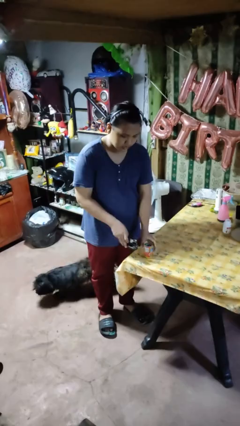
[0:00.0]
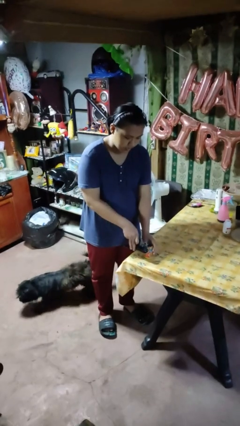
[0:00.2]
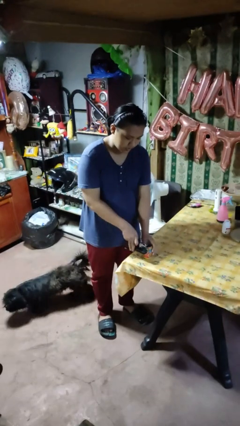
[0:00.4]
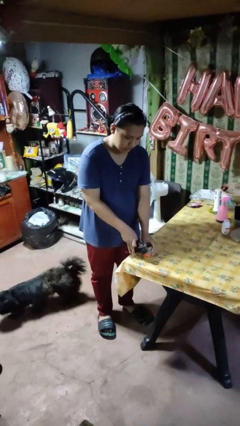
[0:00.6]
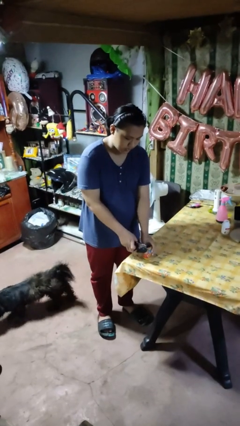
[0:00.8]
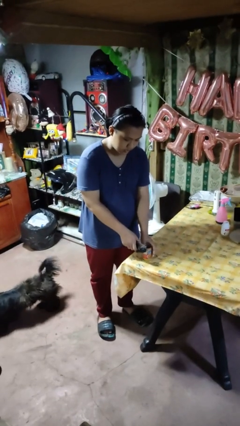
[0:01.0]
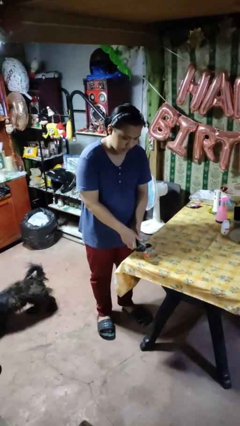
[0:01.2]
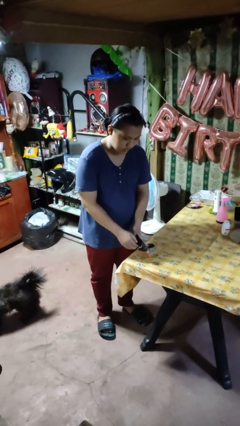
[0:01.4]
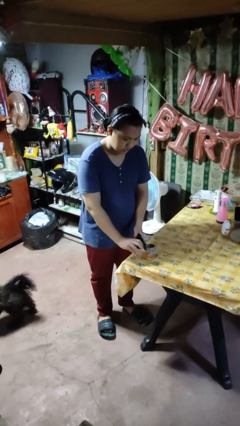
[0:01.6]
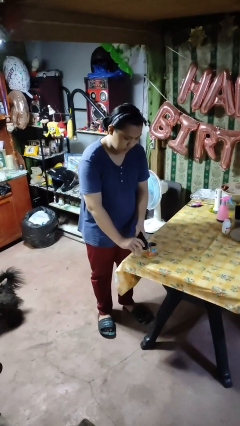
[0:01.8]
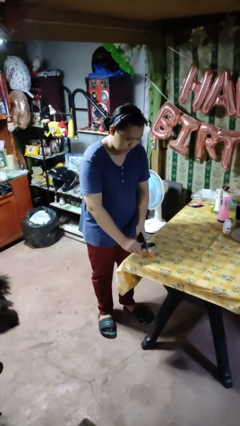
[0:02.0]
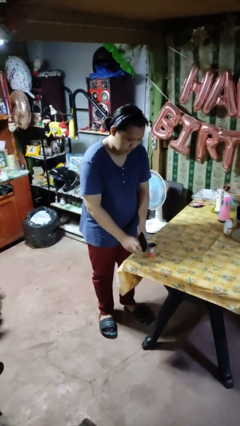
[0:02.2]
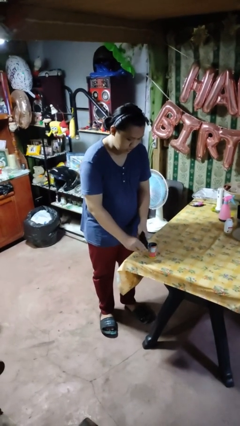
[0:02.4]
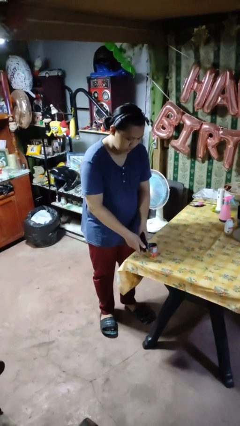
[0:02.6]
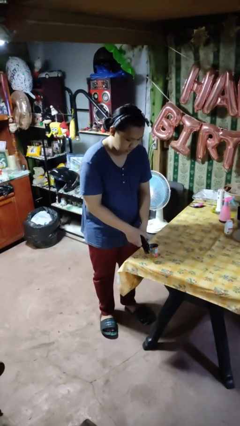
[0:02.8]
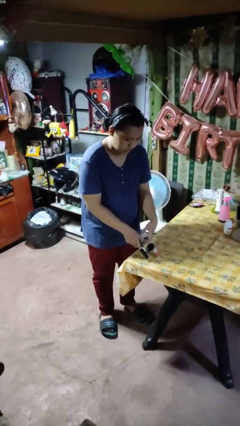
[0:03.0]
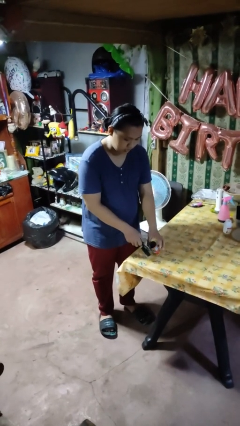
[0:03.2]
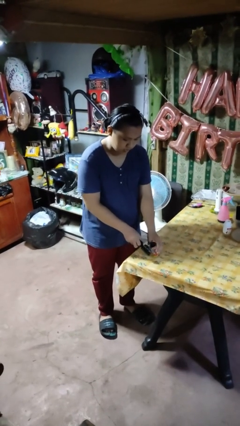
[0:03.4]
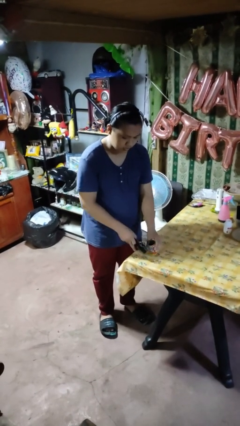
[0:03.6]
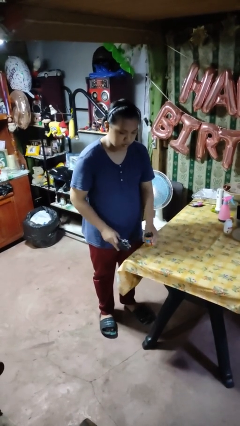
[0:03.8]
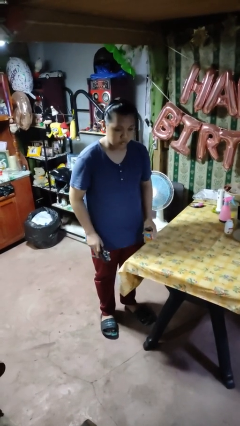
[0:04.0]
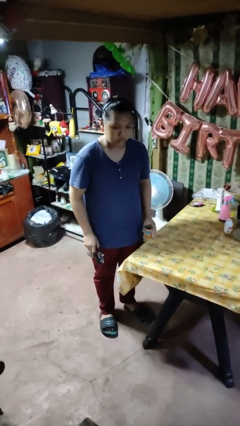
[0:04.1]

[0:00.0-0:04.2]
person opens can with can opener

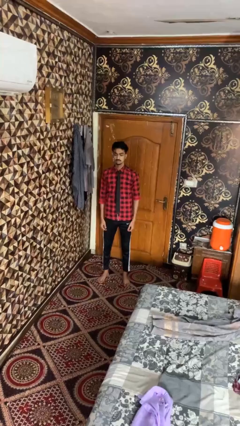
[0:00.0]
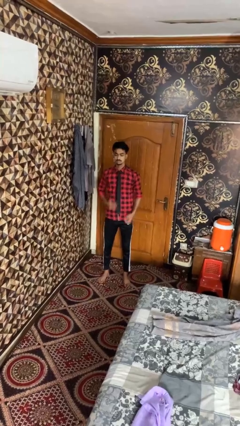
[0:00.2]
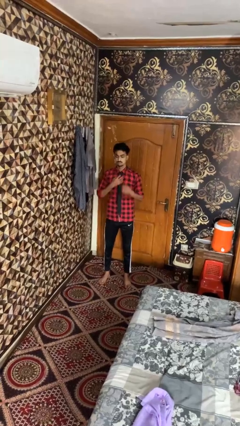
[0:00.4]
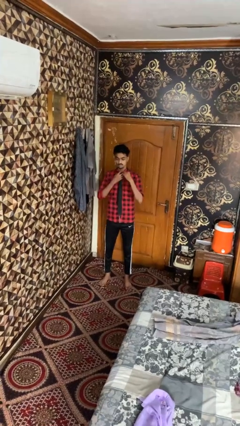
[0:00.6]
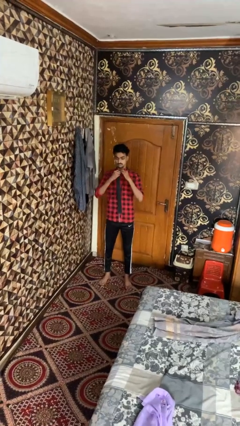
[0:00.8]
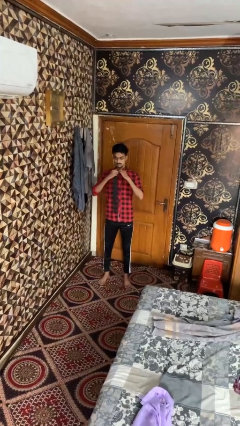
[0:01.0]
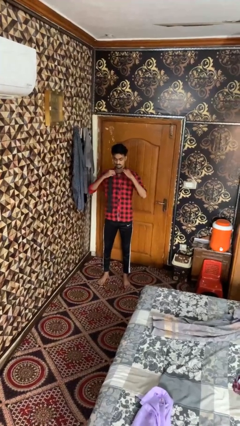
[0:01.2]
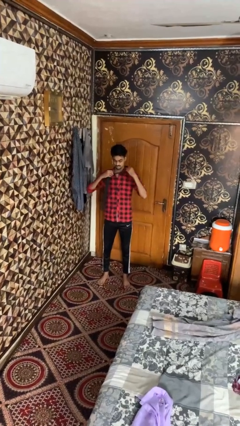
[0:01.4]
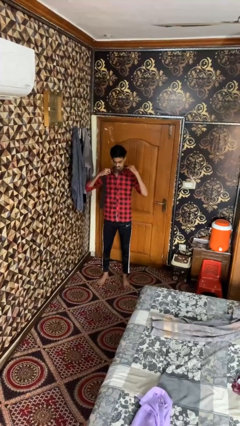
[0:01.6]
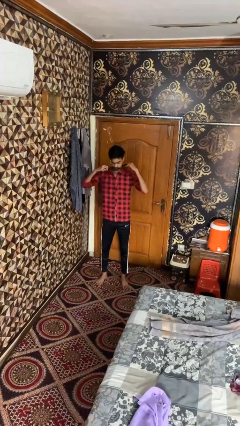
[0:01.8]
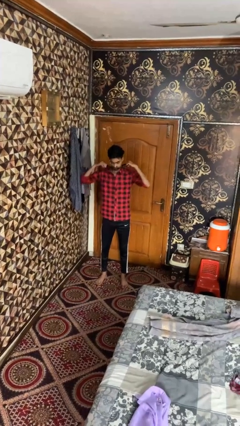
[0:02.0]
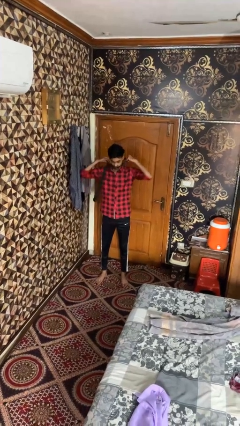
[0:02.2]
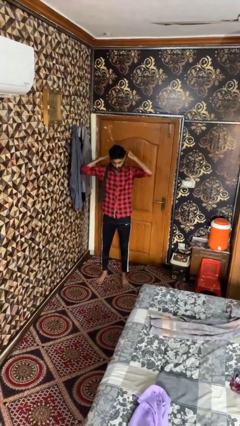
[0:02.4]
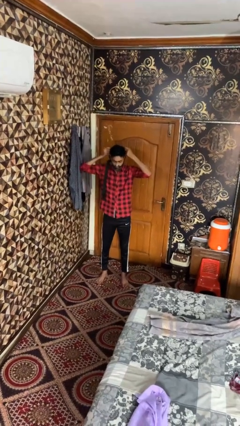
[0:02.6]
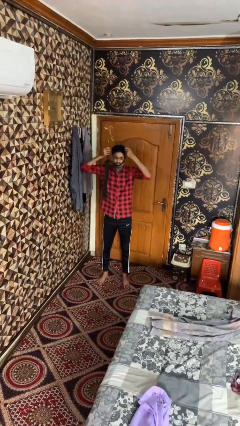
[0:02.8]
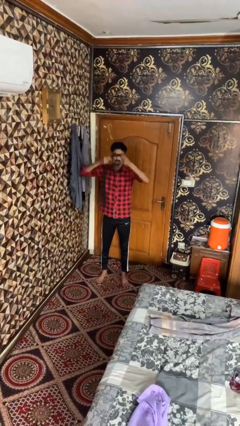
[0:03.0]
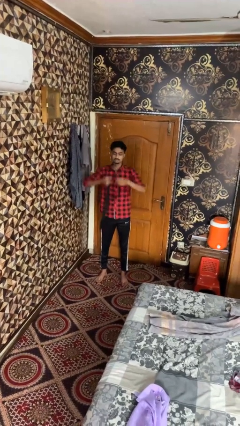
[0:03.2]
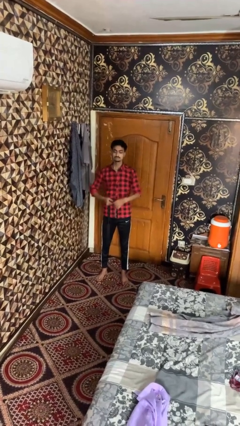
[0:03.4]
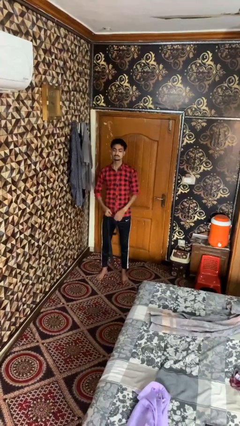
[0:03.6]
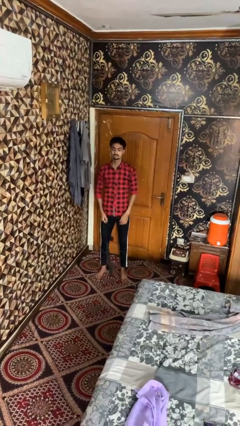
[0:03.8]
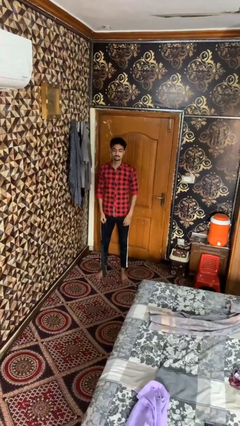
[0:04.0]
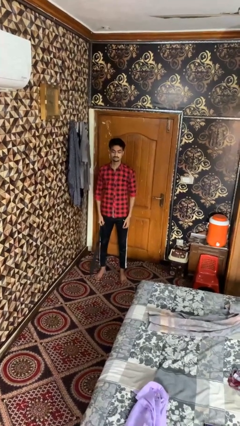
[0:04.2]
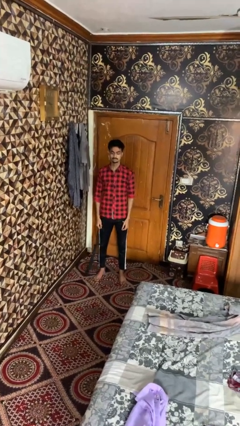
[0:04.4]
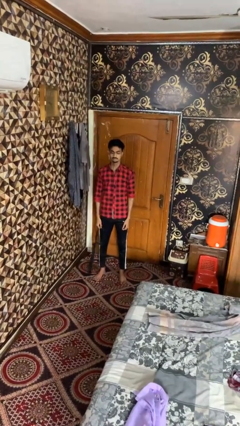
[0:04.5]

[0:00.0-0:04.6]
person takes off necktie

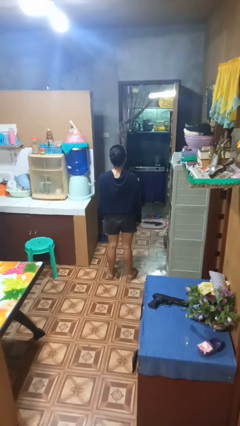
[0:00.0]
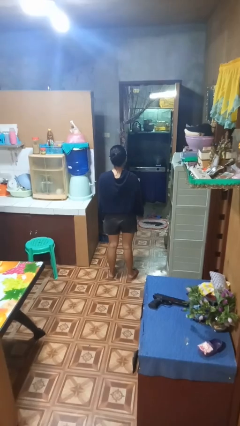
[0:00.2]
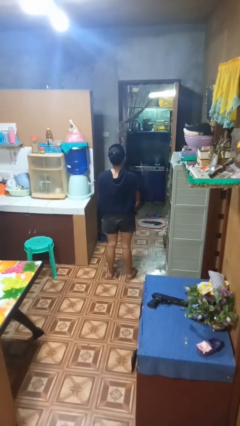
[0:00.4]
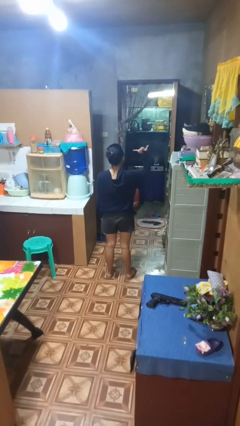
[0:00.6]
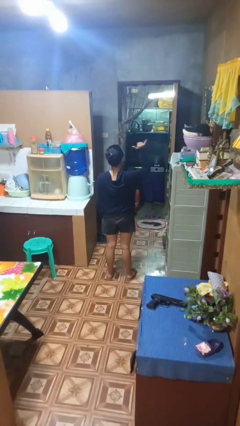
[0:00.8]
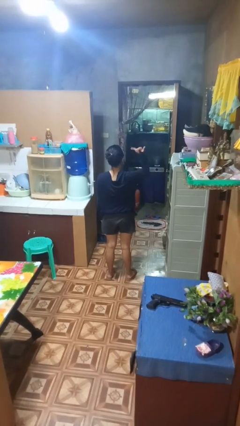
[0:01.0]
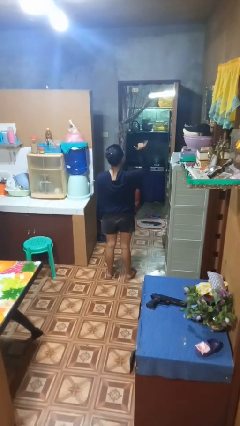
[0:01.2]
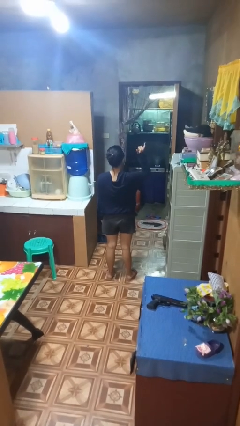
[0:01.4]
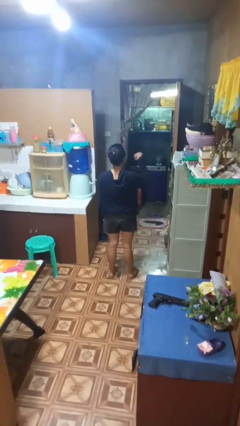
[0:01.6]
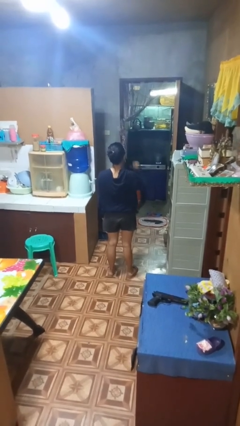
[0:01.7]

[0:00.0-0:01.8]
person gestures hang loose

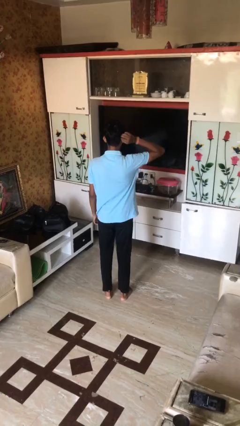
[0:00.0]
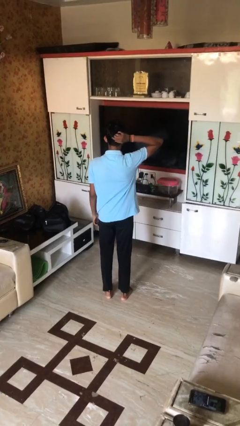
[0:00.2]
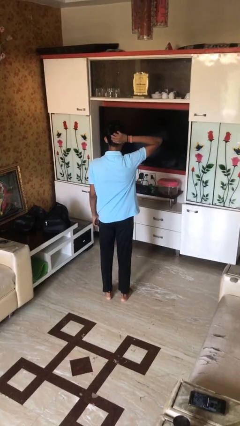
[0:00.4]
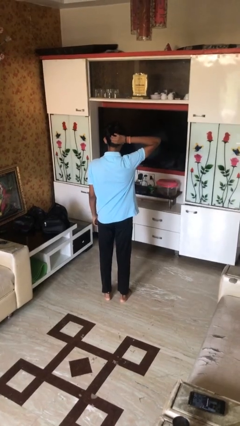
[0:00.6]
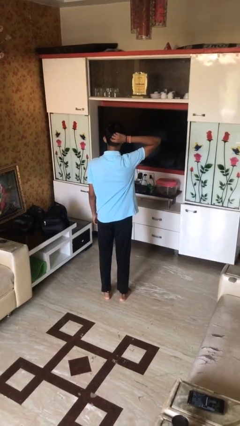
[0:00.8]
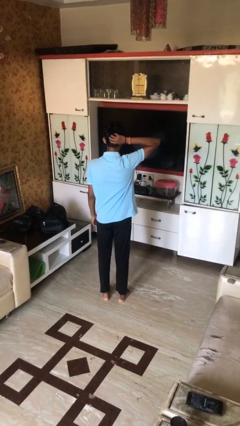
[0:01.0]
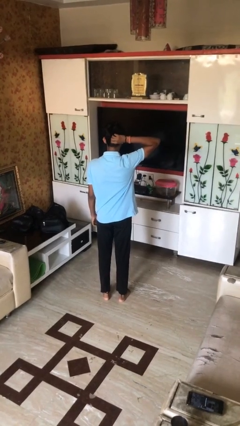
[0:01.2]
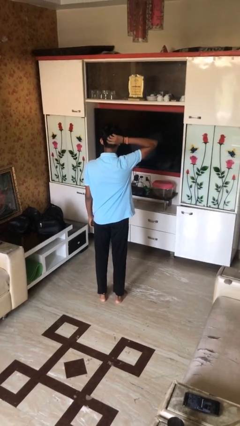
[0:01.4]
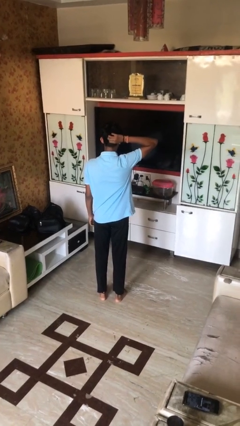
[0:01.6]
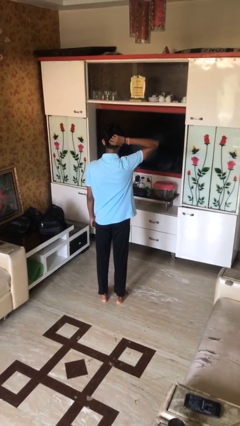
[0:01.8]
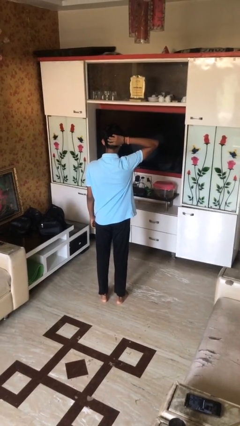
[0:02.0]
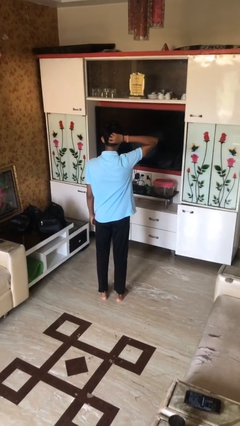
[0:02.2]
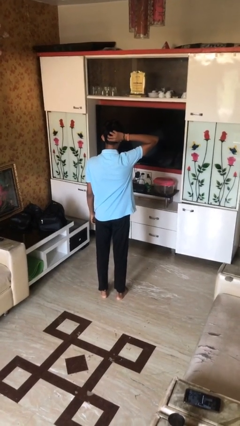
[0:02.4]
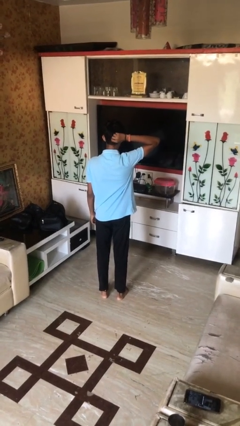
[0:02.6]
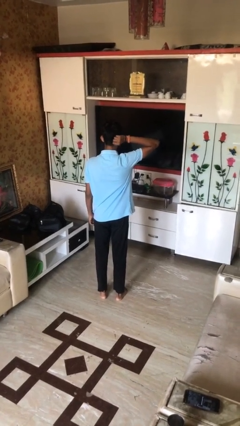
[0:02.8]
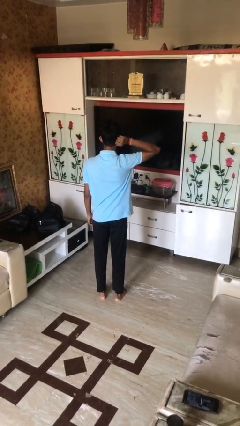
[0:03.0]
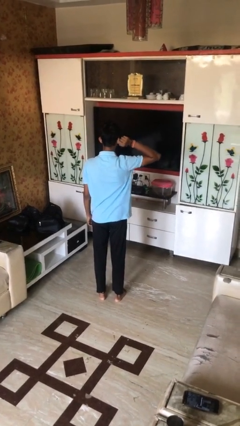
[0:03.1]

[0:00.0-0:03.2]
person scratches face

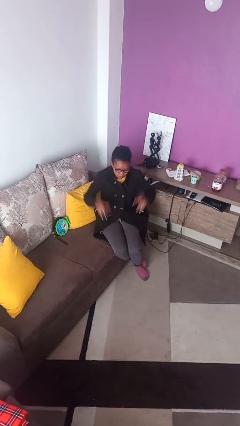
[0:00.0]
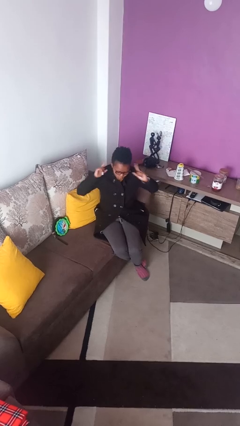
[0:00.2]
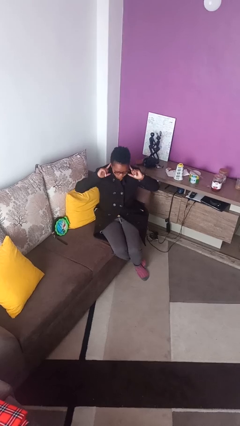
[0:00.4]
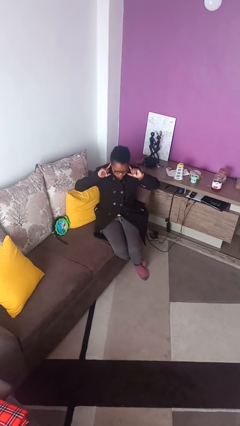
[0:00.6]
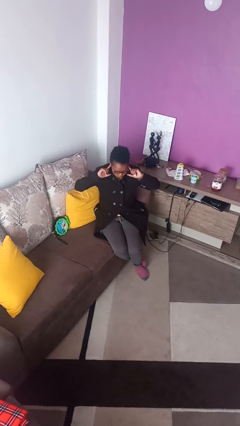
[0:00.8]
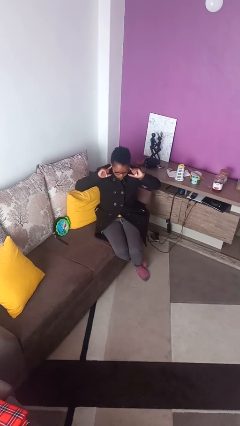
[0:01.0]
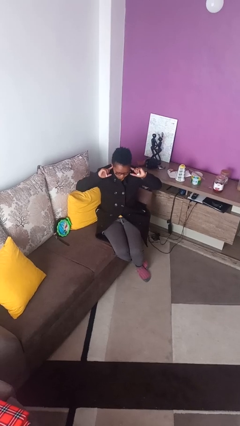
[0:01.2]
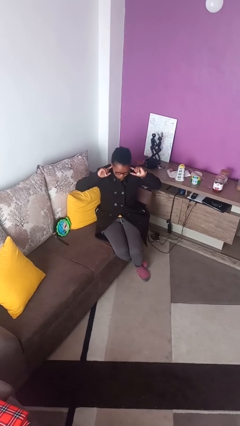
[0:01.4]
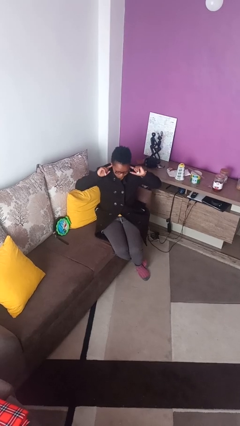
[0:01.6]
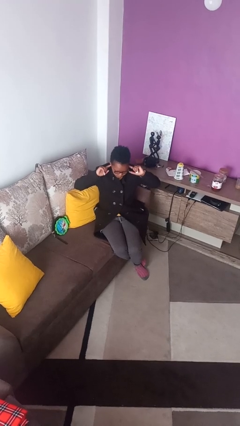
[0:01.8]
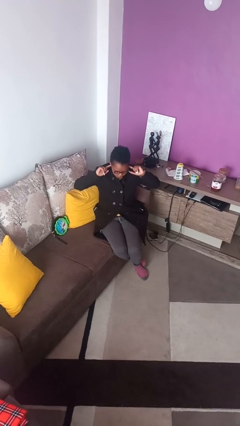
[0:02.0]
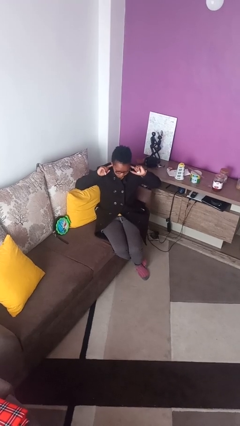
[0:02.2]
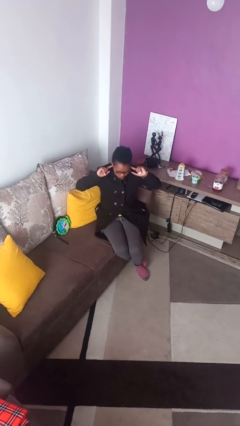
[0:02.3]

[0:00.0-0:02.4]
person puts fingers in ear

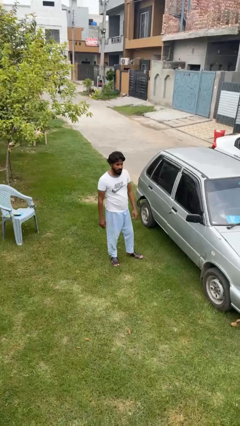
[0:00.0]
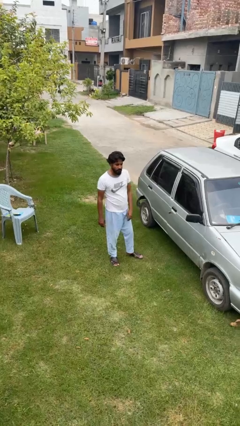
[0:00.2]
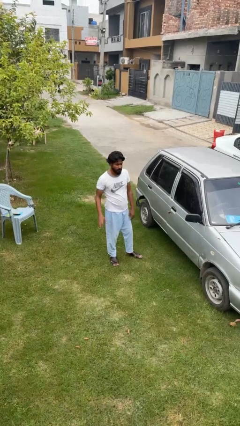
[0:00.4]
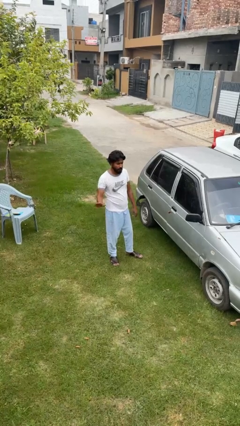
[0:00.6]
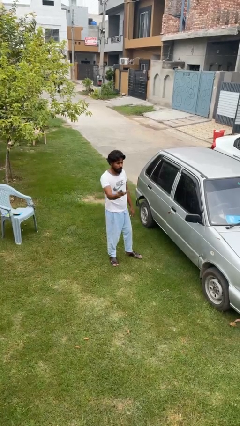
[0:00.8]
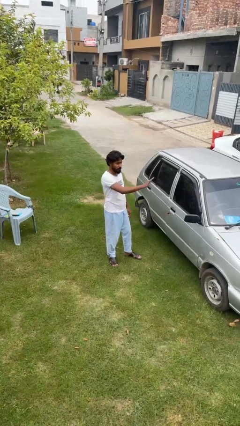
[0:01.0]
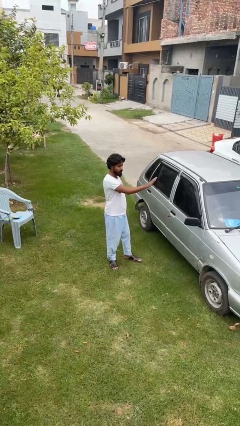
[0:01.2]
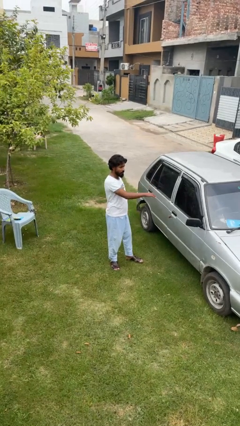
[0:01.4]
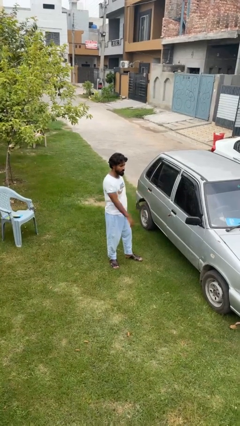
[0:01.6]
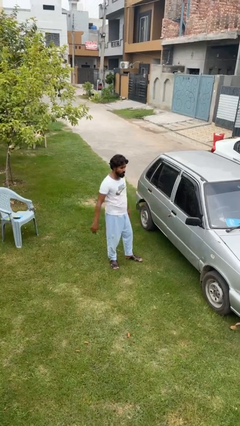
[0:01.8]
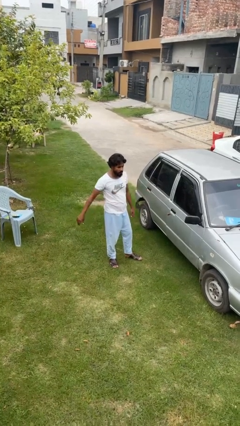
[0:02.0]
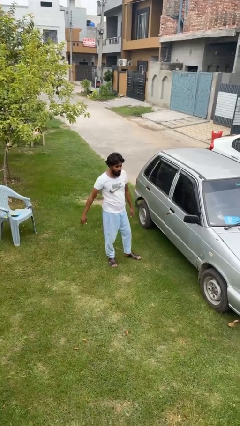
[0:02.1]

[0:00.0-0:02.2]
person gestures swipe left
